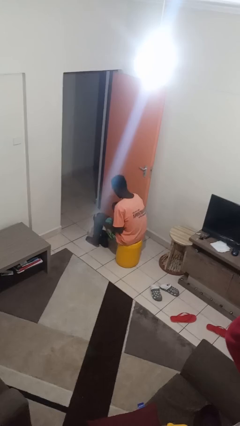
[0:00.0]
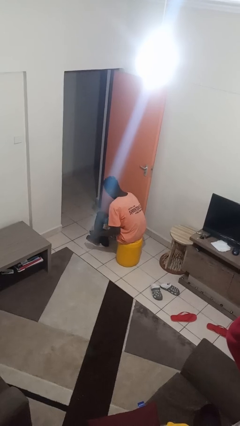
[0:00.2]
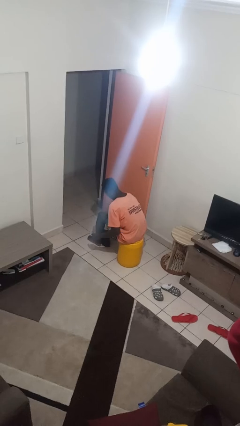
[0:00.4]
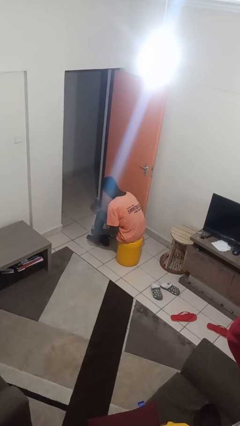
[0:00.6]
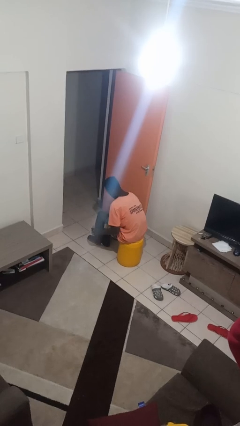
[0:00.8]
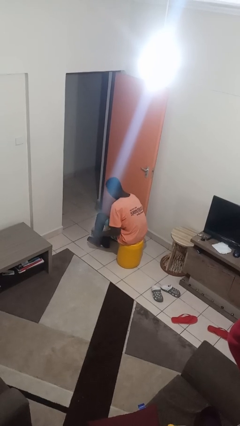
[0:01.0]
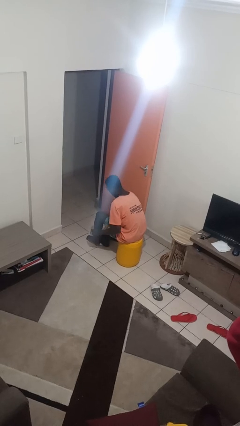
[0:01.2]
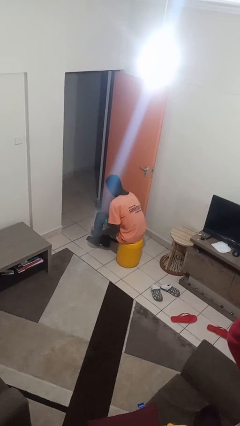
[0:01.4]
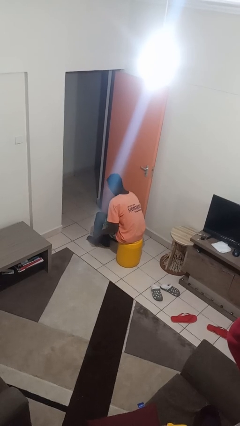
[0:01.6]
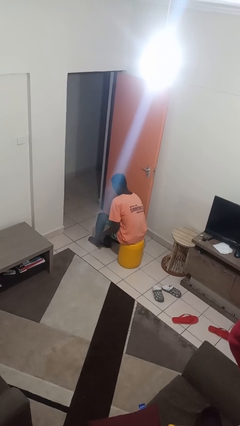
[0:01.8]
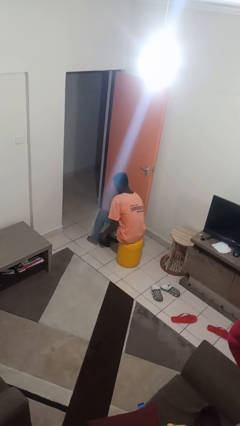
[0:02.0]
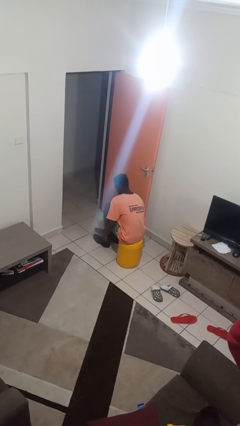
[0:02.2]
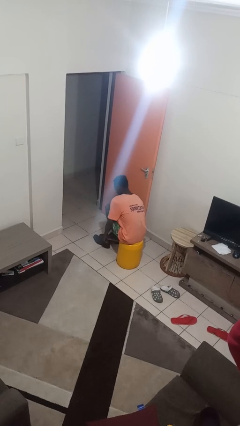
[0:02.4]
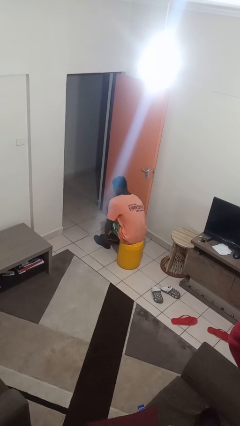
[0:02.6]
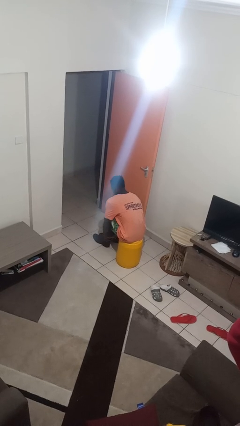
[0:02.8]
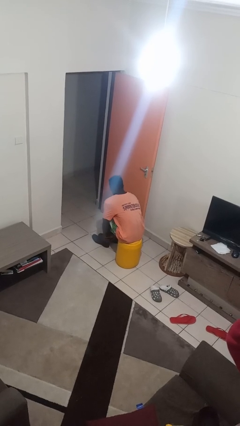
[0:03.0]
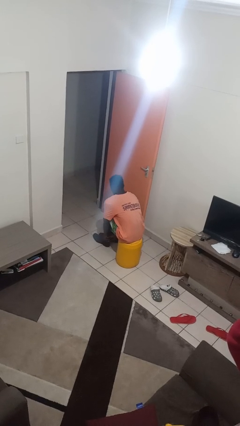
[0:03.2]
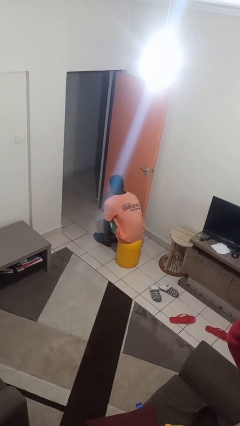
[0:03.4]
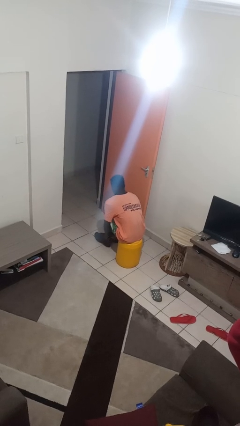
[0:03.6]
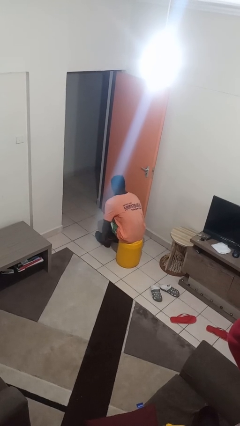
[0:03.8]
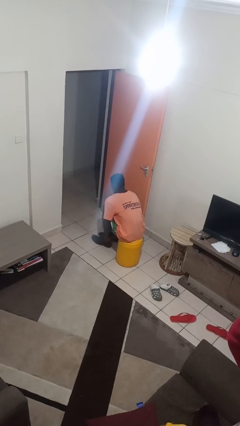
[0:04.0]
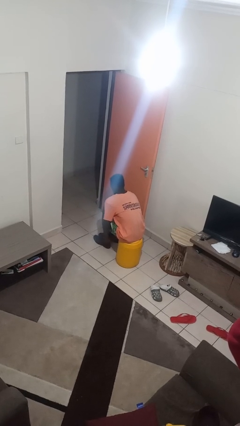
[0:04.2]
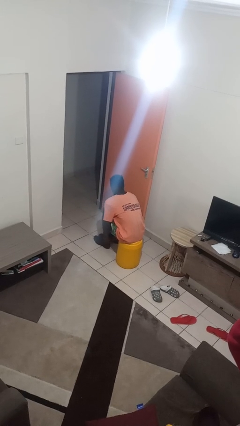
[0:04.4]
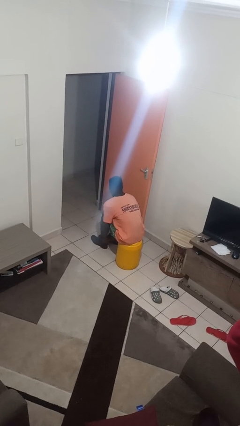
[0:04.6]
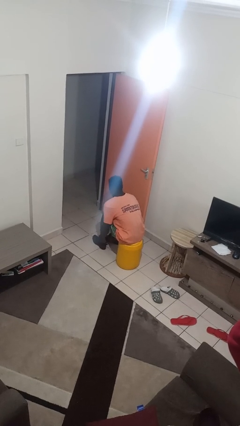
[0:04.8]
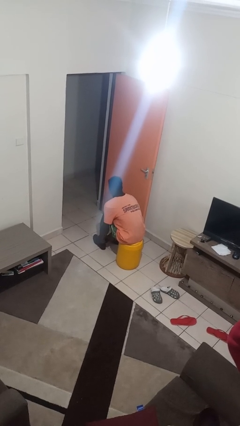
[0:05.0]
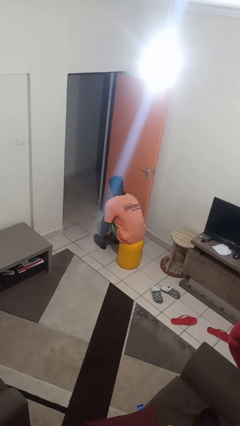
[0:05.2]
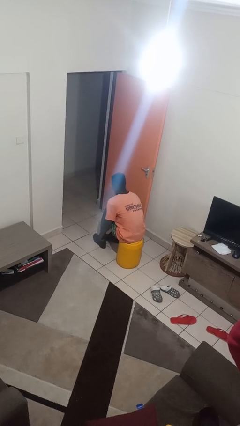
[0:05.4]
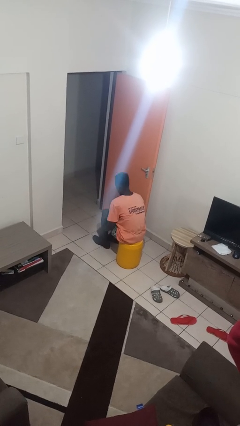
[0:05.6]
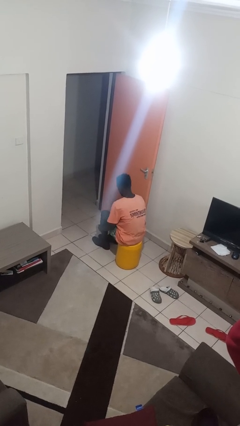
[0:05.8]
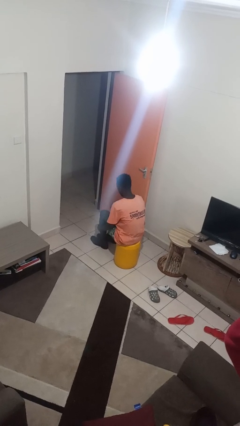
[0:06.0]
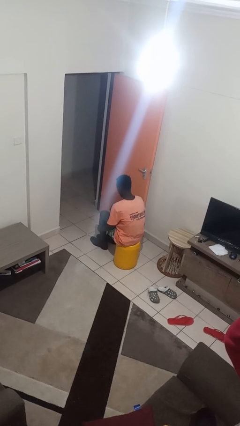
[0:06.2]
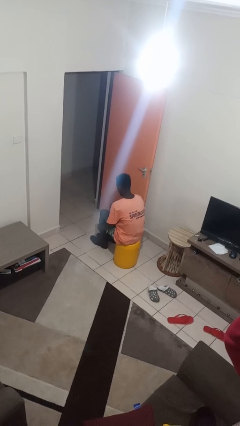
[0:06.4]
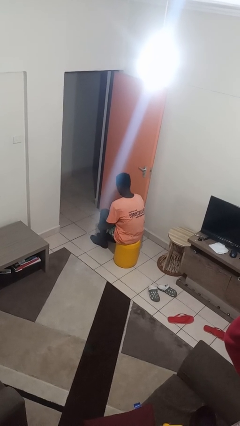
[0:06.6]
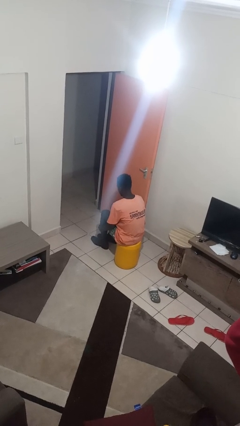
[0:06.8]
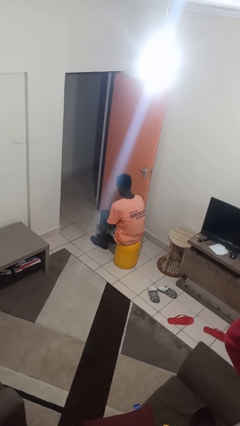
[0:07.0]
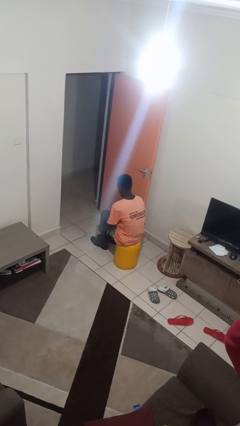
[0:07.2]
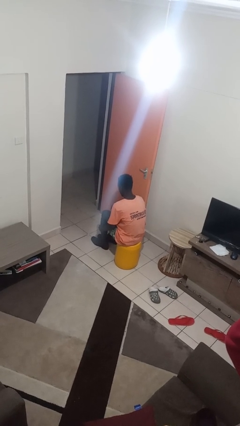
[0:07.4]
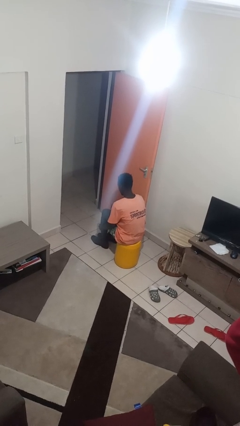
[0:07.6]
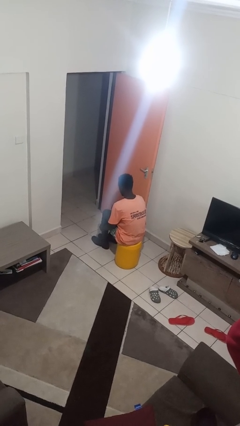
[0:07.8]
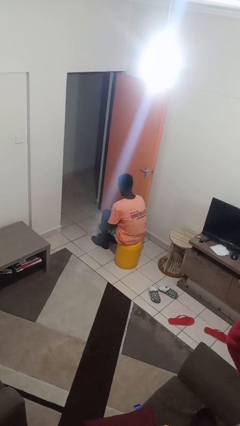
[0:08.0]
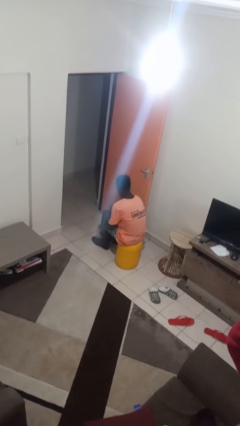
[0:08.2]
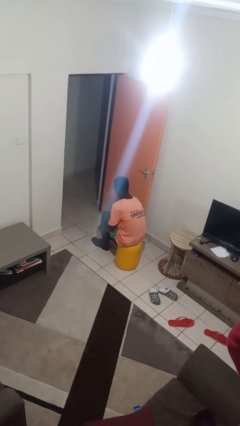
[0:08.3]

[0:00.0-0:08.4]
person puts on shoes

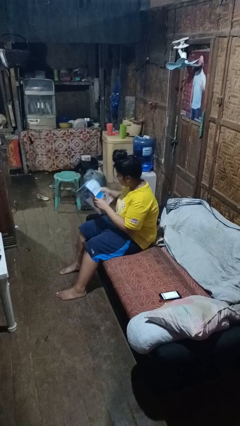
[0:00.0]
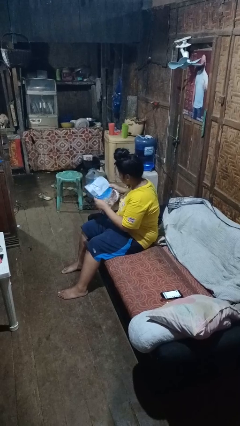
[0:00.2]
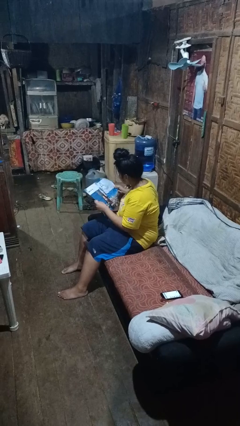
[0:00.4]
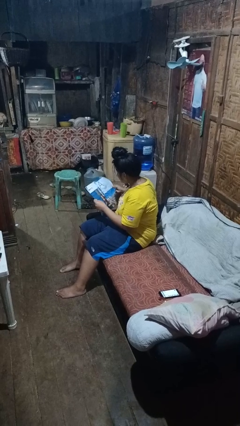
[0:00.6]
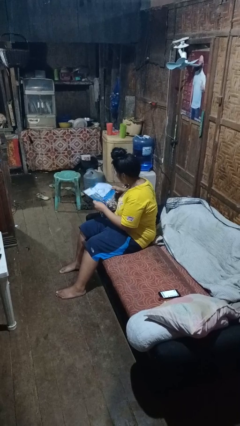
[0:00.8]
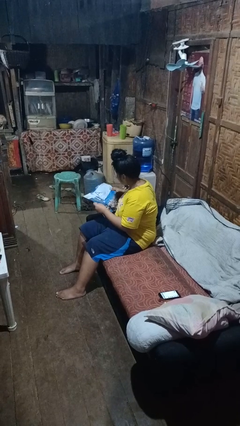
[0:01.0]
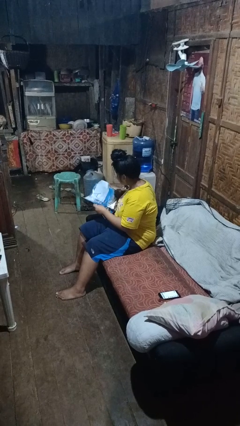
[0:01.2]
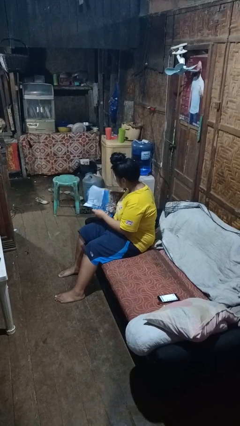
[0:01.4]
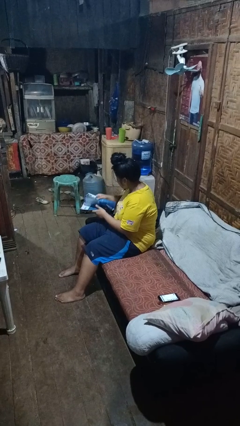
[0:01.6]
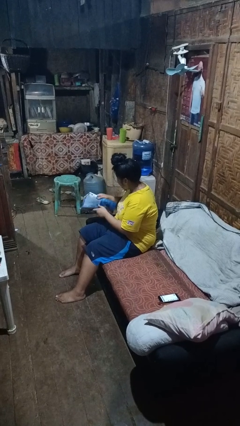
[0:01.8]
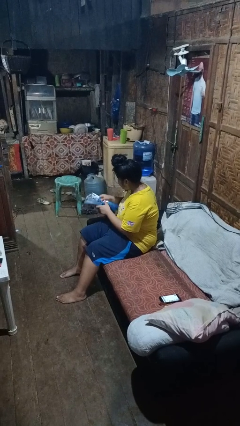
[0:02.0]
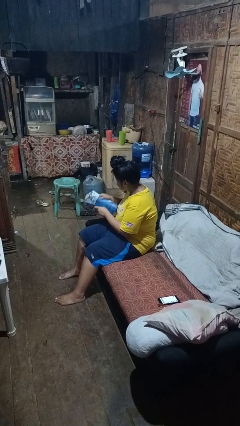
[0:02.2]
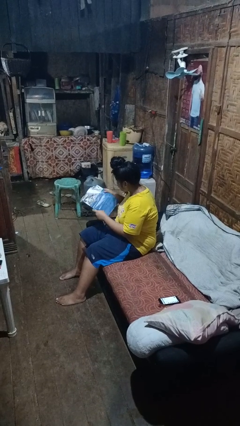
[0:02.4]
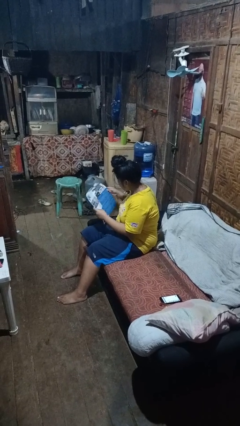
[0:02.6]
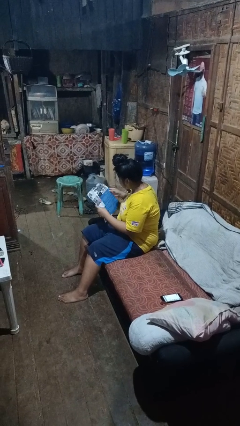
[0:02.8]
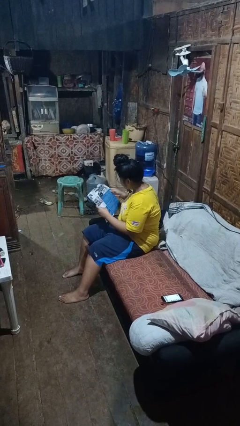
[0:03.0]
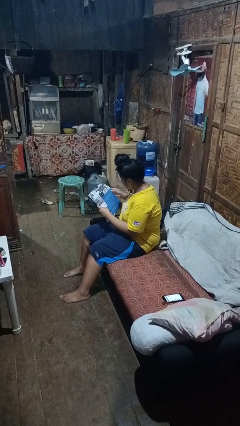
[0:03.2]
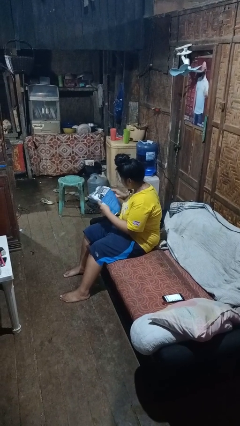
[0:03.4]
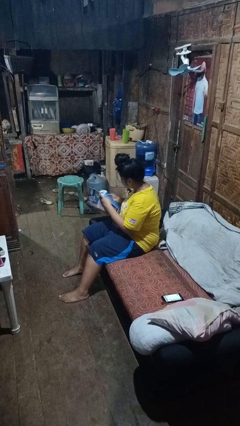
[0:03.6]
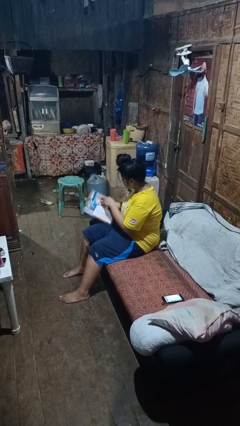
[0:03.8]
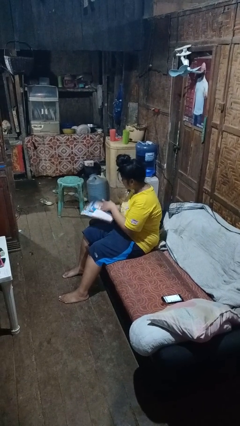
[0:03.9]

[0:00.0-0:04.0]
person reads magazine

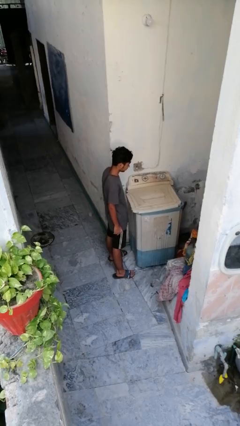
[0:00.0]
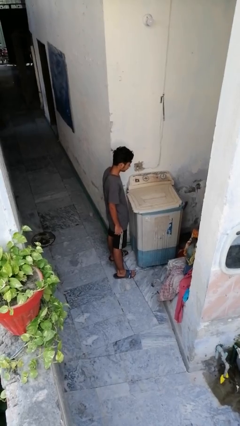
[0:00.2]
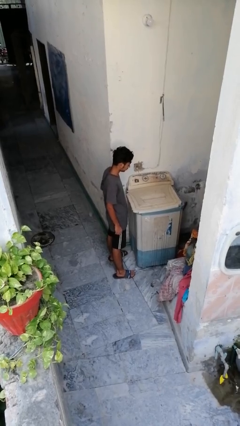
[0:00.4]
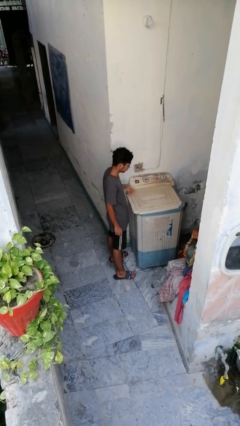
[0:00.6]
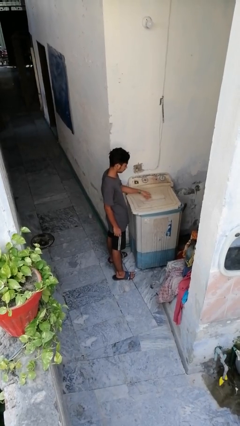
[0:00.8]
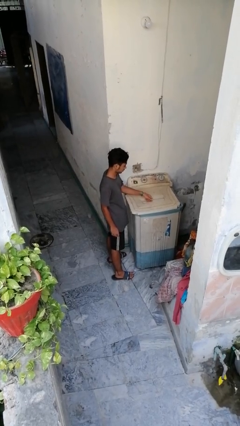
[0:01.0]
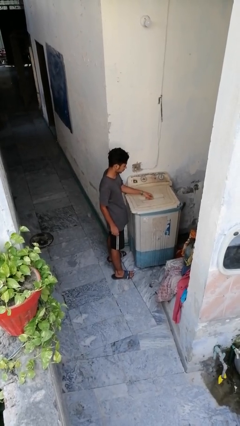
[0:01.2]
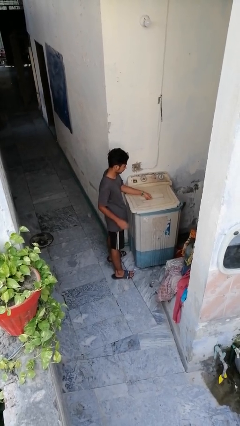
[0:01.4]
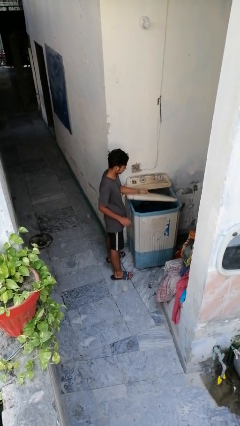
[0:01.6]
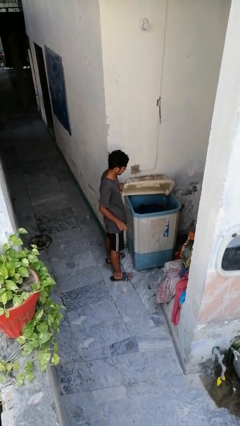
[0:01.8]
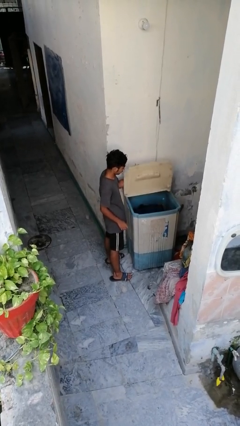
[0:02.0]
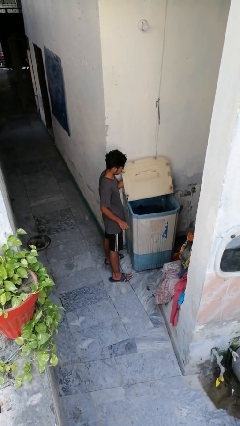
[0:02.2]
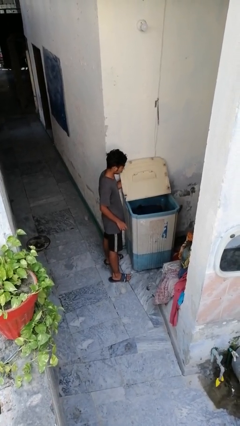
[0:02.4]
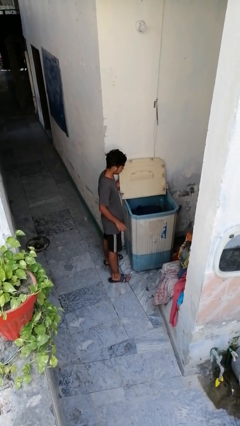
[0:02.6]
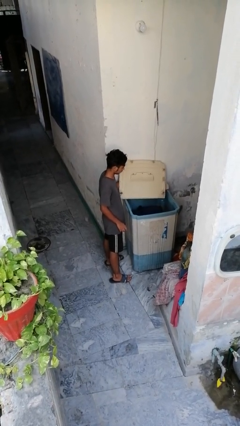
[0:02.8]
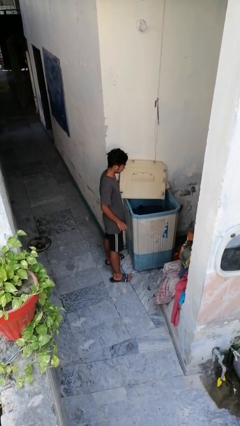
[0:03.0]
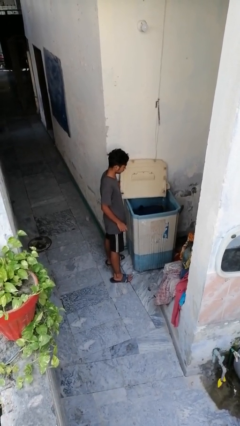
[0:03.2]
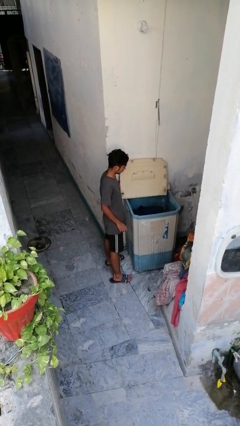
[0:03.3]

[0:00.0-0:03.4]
person opens clothes washer

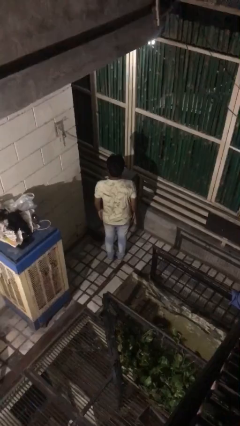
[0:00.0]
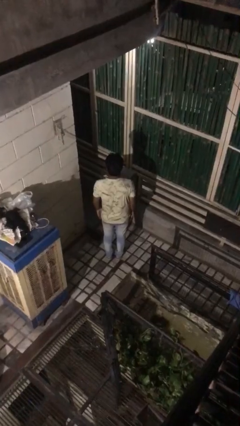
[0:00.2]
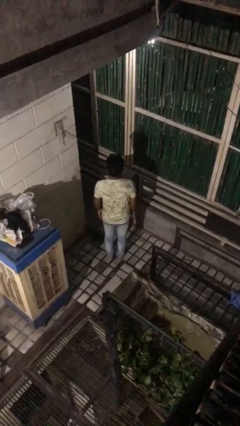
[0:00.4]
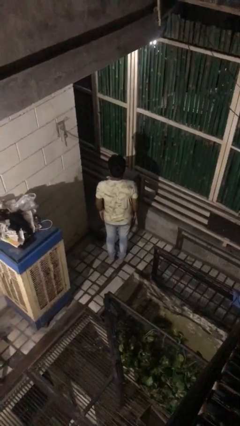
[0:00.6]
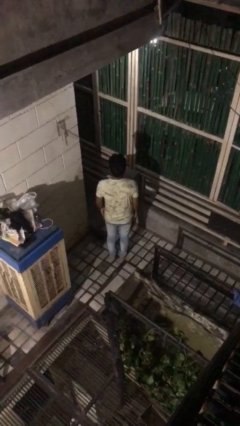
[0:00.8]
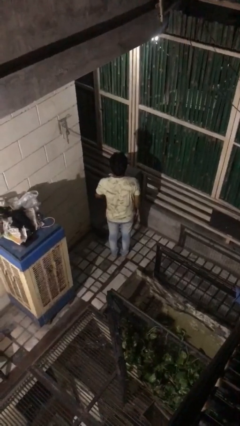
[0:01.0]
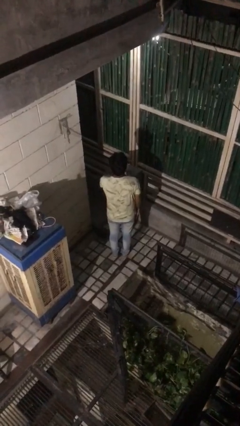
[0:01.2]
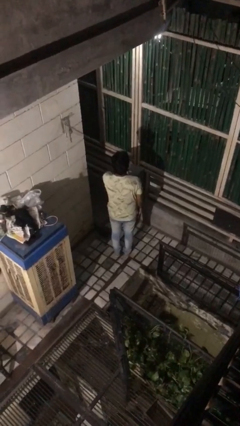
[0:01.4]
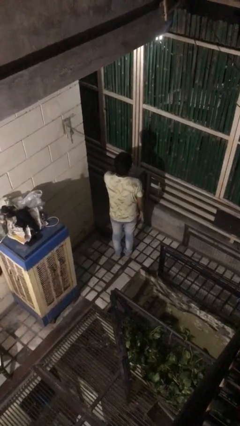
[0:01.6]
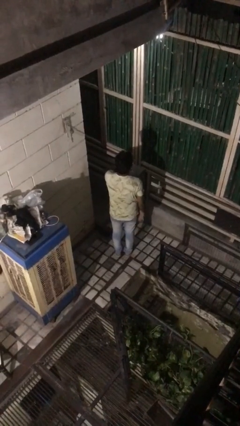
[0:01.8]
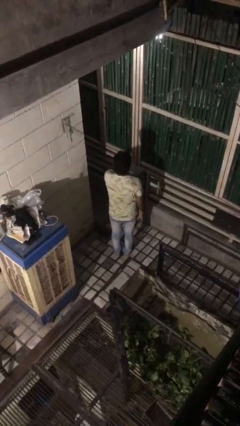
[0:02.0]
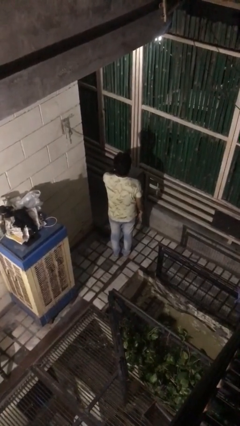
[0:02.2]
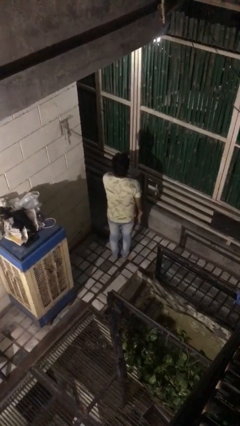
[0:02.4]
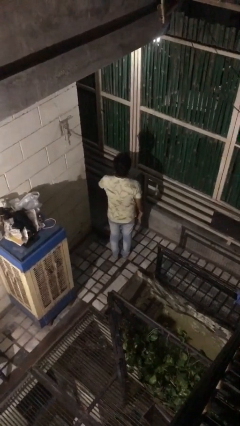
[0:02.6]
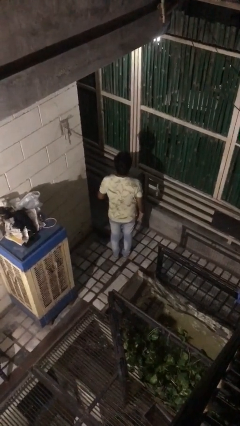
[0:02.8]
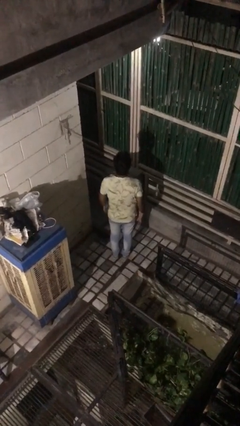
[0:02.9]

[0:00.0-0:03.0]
person gestures cut
